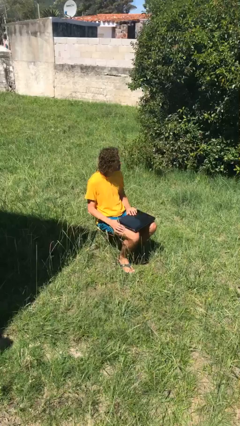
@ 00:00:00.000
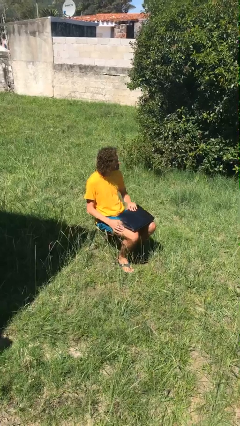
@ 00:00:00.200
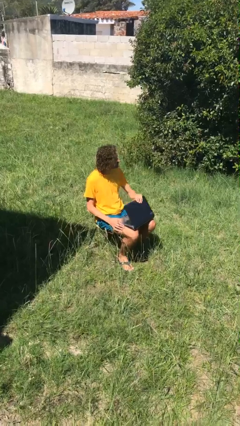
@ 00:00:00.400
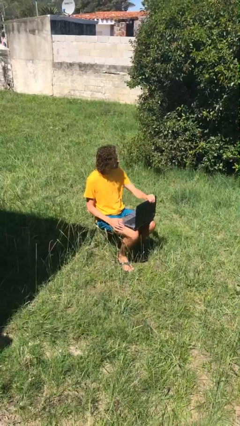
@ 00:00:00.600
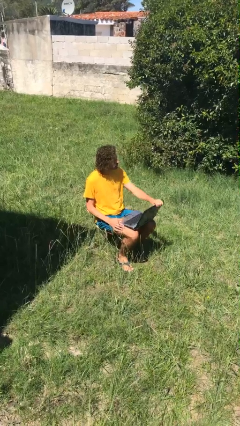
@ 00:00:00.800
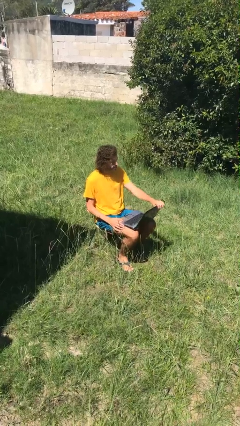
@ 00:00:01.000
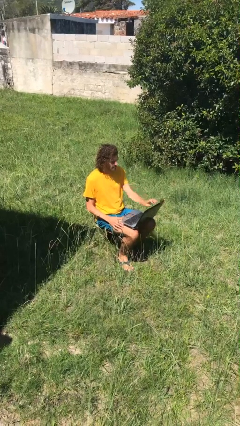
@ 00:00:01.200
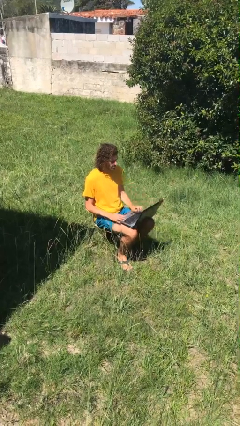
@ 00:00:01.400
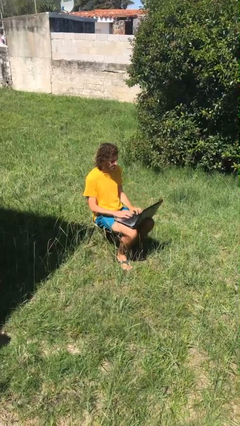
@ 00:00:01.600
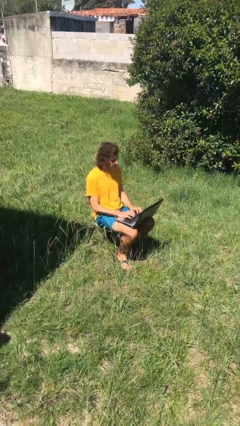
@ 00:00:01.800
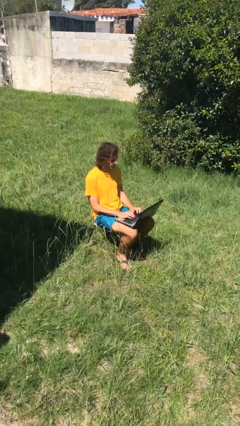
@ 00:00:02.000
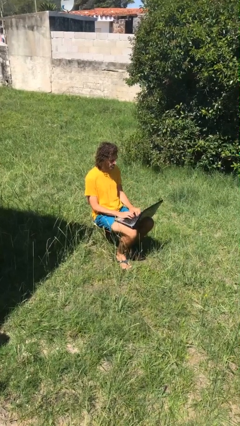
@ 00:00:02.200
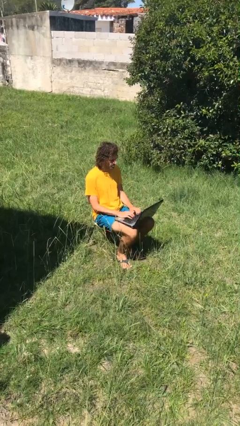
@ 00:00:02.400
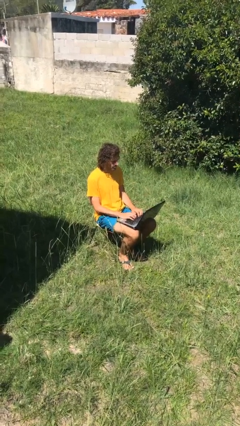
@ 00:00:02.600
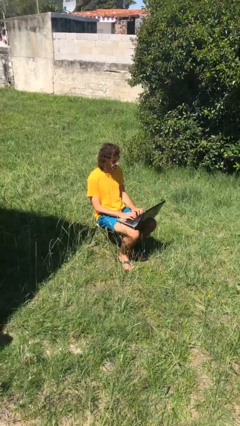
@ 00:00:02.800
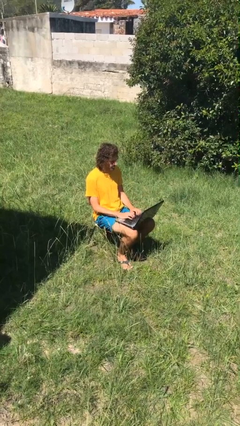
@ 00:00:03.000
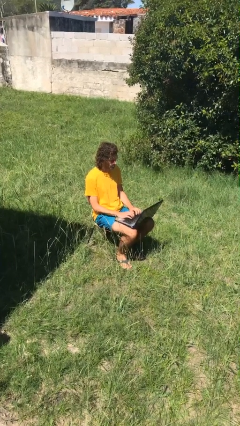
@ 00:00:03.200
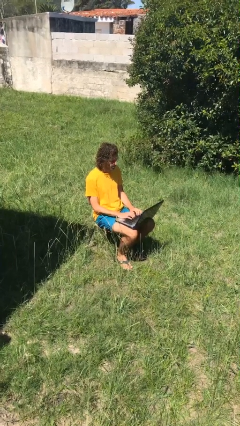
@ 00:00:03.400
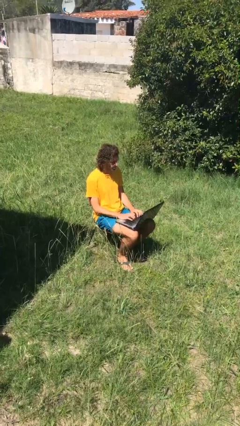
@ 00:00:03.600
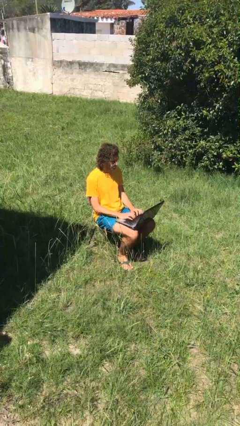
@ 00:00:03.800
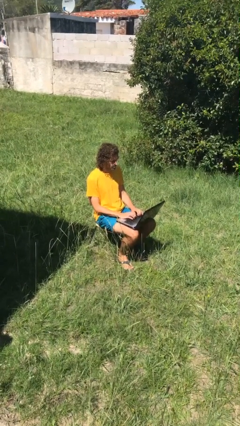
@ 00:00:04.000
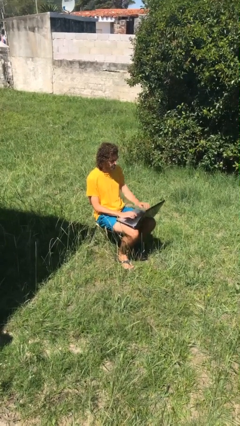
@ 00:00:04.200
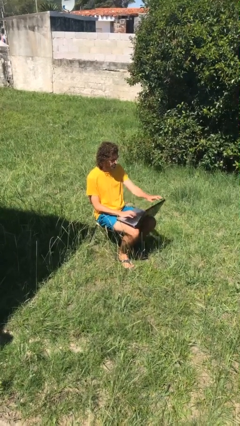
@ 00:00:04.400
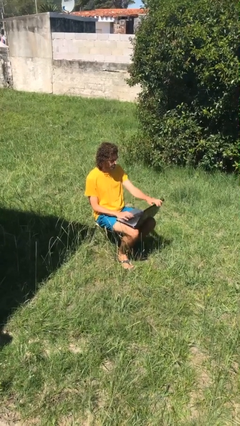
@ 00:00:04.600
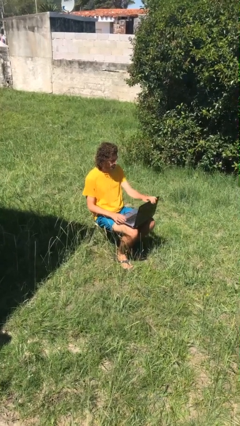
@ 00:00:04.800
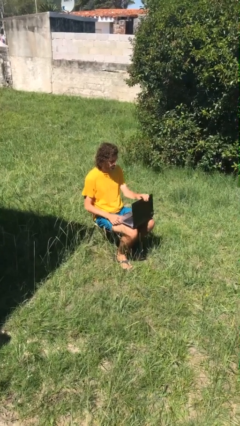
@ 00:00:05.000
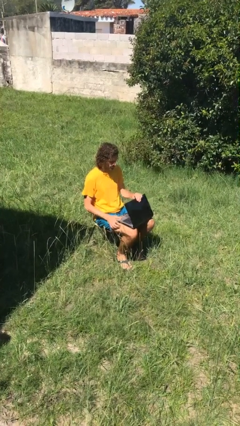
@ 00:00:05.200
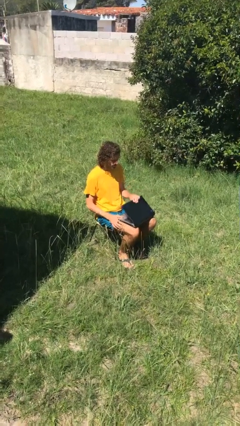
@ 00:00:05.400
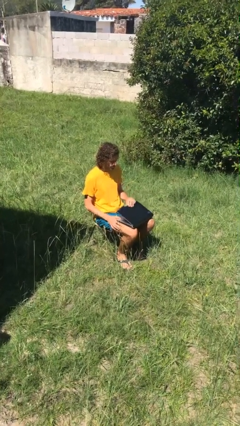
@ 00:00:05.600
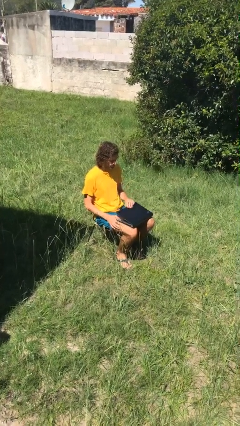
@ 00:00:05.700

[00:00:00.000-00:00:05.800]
person interacts with laptop

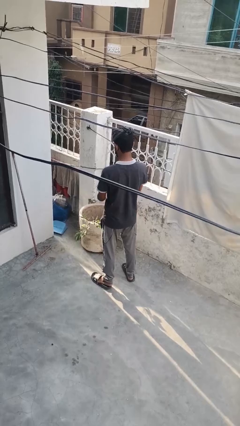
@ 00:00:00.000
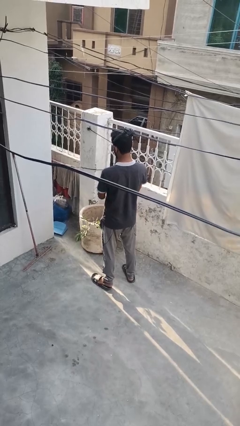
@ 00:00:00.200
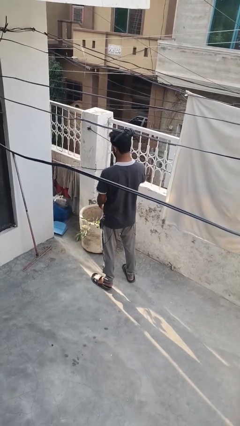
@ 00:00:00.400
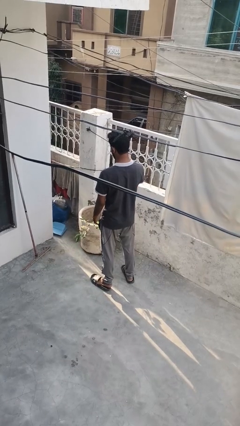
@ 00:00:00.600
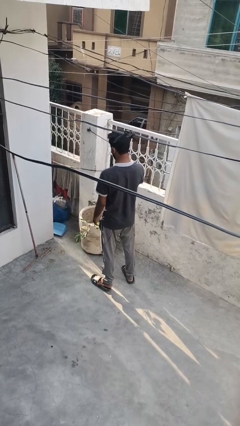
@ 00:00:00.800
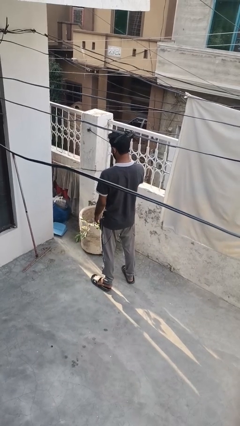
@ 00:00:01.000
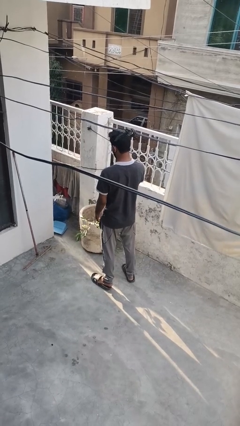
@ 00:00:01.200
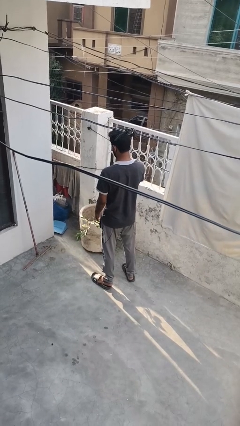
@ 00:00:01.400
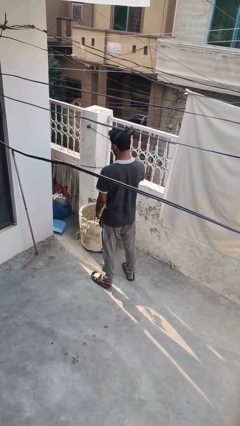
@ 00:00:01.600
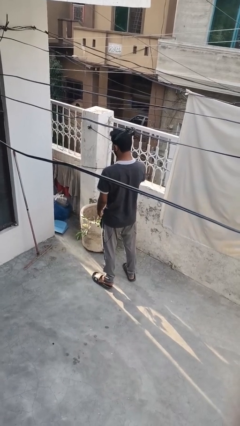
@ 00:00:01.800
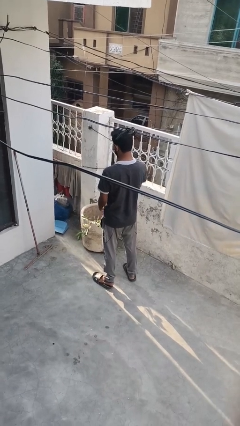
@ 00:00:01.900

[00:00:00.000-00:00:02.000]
person waters houseplant

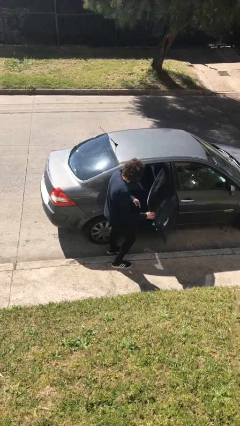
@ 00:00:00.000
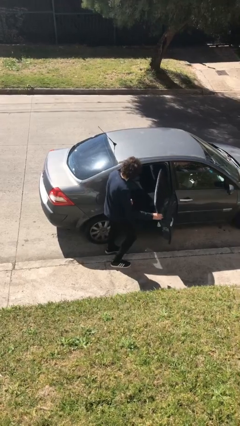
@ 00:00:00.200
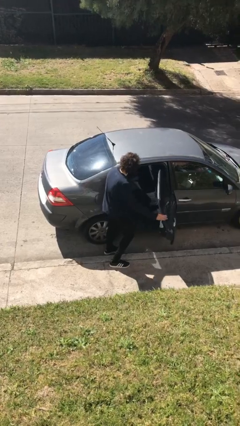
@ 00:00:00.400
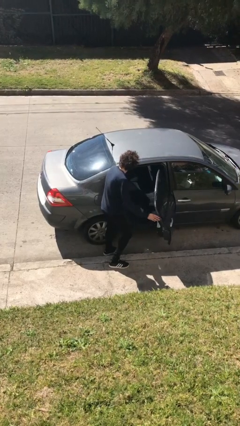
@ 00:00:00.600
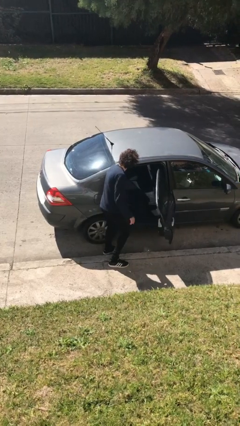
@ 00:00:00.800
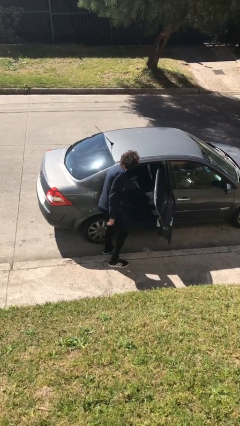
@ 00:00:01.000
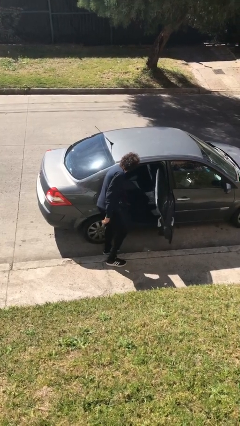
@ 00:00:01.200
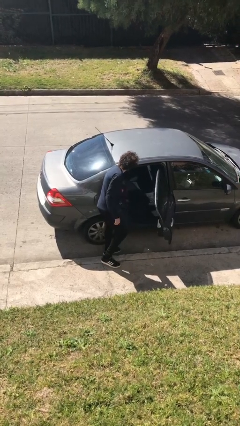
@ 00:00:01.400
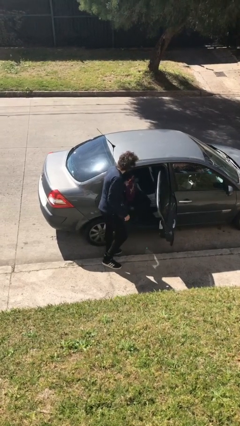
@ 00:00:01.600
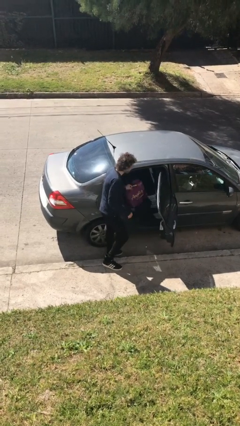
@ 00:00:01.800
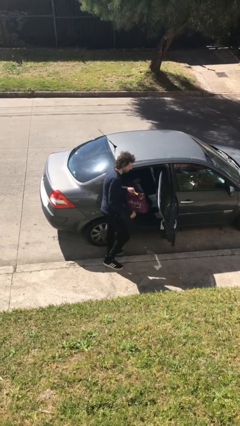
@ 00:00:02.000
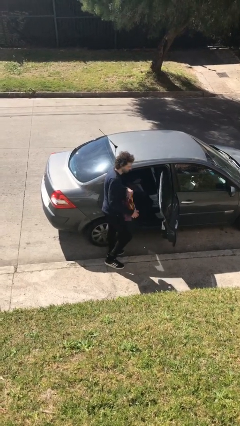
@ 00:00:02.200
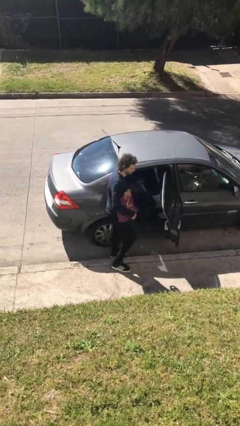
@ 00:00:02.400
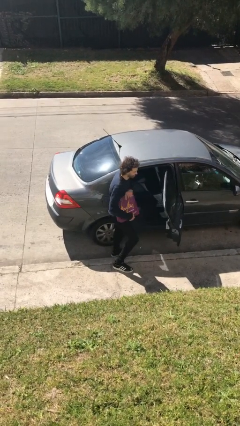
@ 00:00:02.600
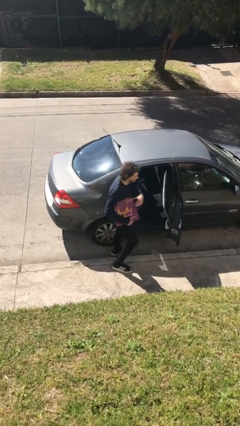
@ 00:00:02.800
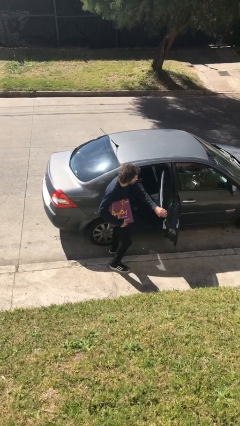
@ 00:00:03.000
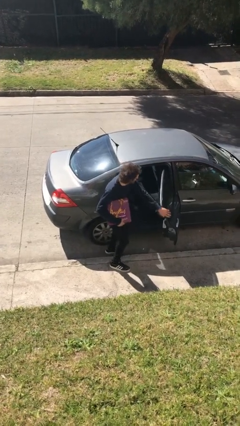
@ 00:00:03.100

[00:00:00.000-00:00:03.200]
person unloads car

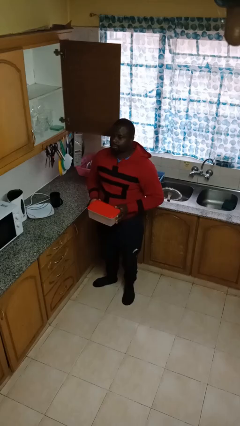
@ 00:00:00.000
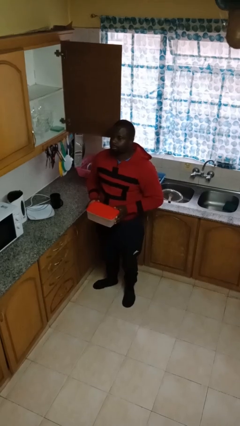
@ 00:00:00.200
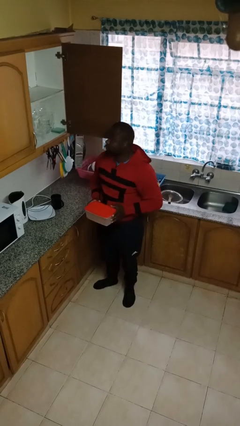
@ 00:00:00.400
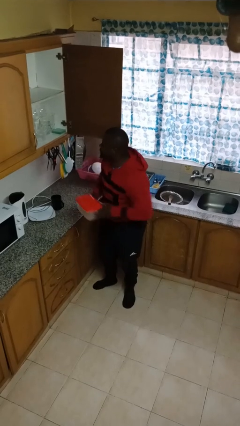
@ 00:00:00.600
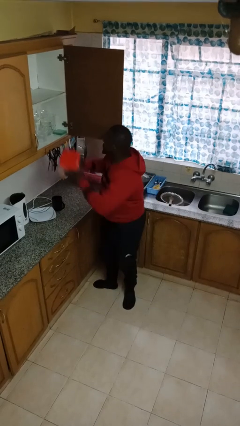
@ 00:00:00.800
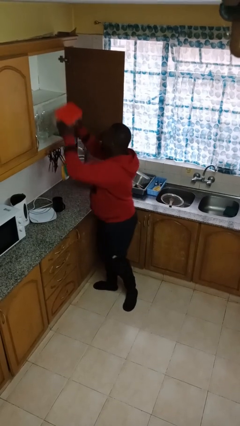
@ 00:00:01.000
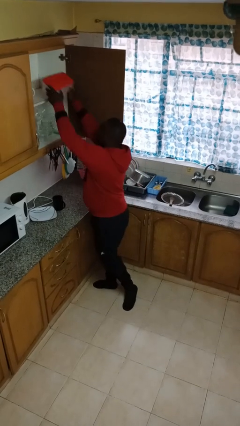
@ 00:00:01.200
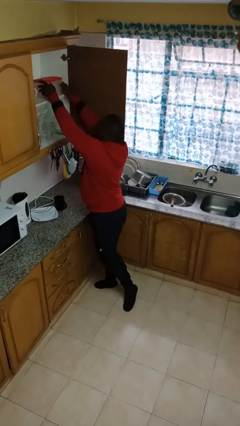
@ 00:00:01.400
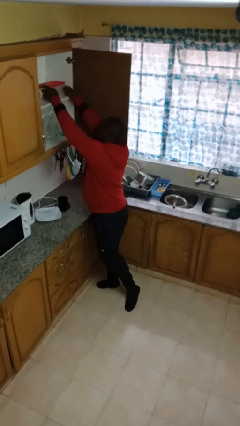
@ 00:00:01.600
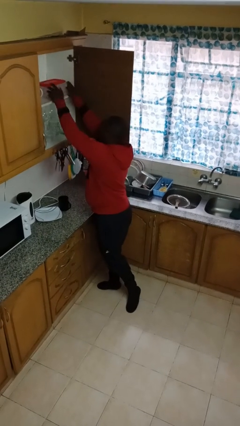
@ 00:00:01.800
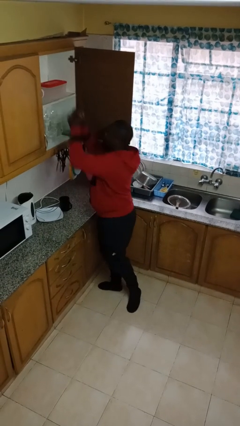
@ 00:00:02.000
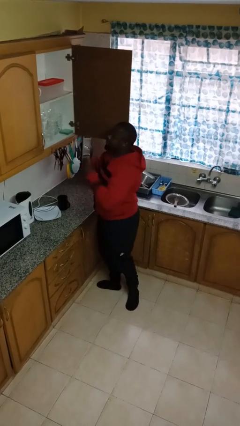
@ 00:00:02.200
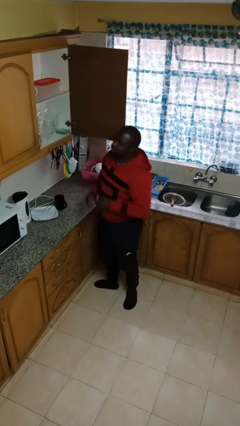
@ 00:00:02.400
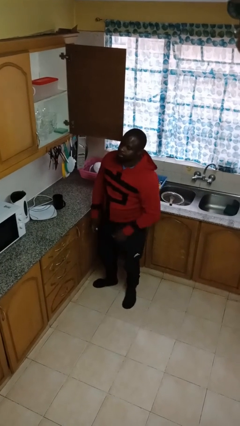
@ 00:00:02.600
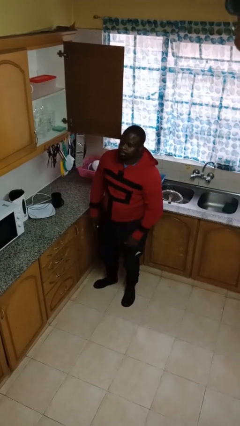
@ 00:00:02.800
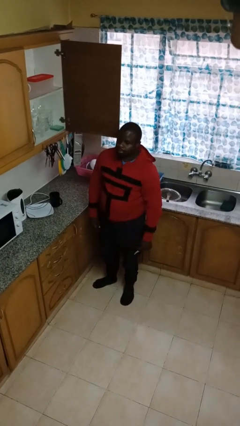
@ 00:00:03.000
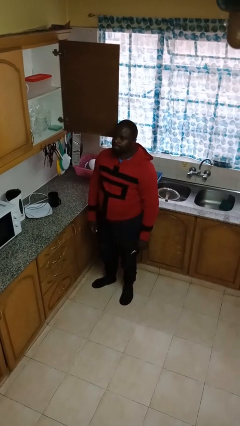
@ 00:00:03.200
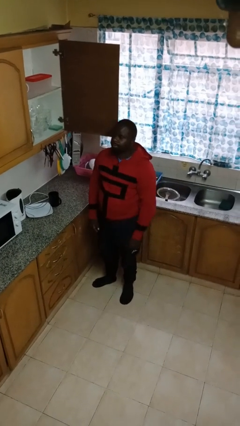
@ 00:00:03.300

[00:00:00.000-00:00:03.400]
person puts down object into cabinet

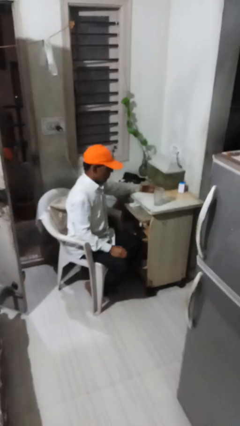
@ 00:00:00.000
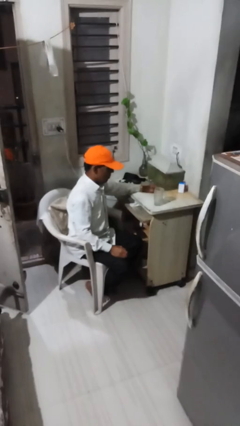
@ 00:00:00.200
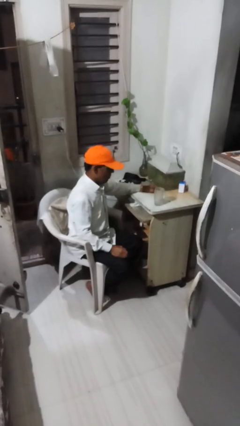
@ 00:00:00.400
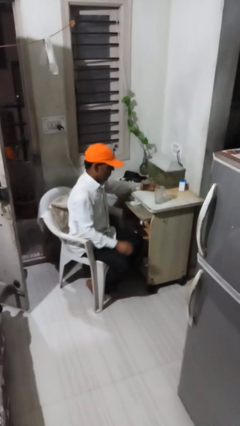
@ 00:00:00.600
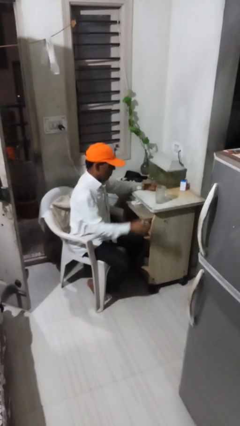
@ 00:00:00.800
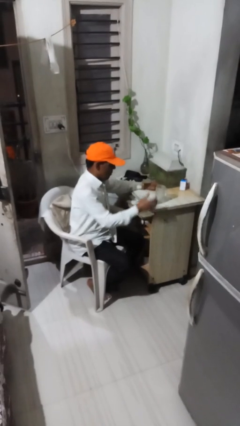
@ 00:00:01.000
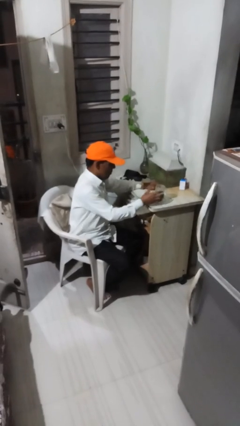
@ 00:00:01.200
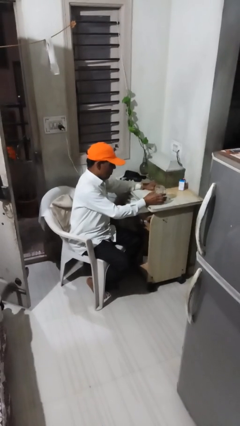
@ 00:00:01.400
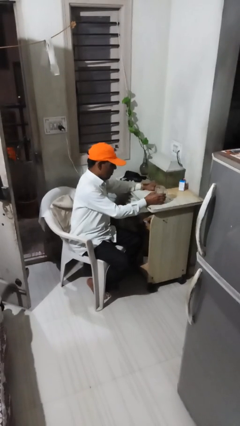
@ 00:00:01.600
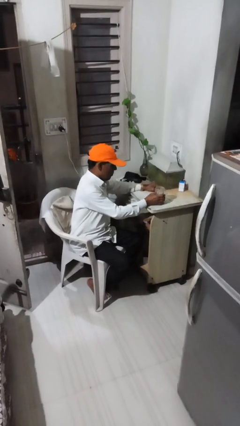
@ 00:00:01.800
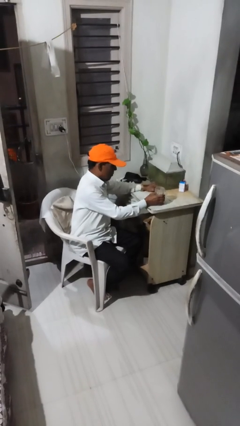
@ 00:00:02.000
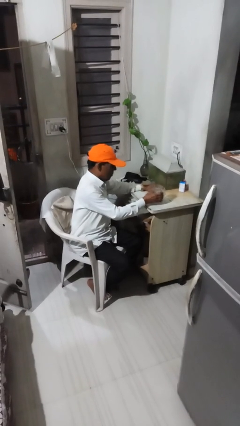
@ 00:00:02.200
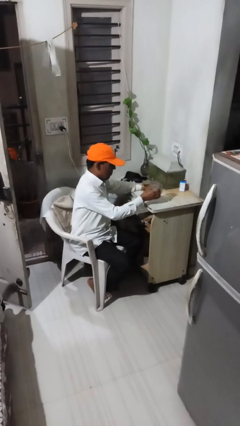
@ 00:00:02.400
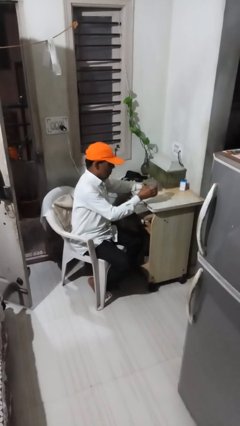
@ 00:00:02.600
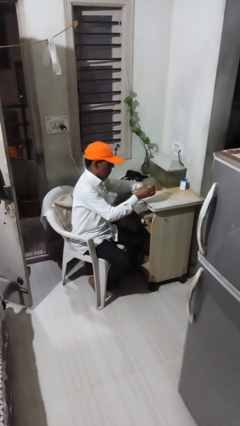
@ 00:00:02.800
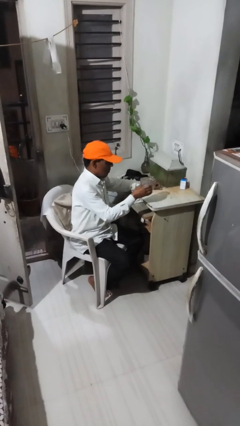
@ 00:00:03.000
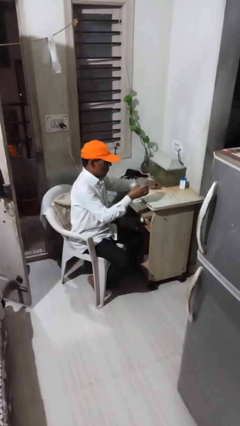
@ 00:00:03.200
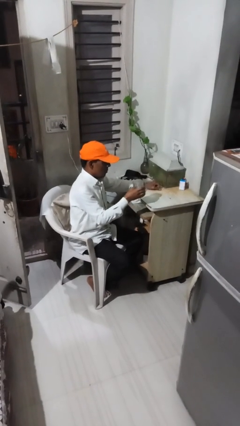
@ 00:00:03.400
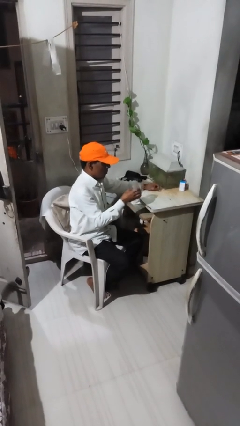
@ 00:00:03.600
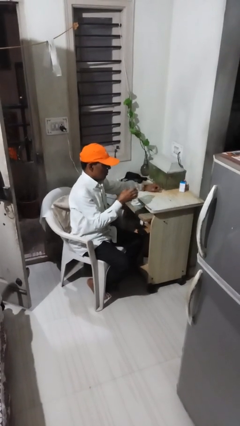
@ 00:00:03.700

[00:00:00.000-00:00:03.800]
person picks up object from table
